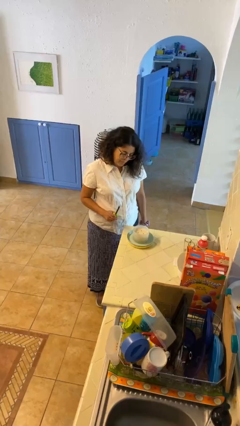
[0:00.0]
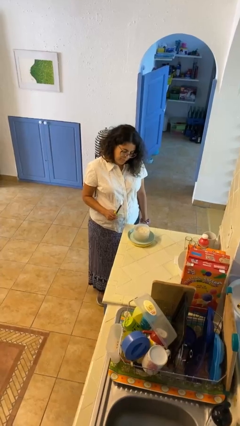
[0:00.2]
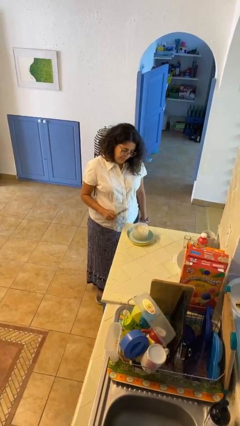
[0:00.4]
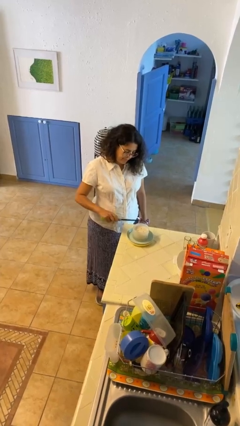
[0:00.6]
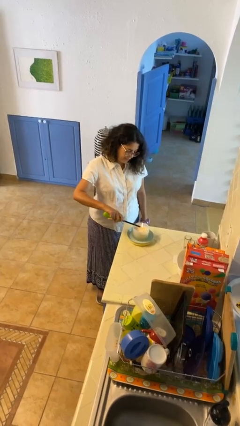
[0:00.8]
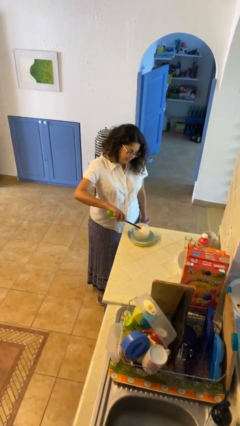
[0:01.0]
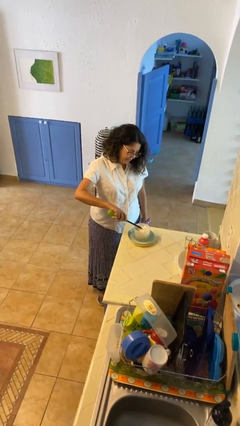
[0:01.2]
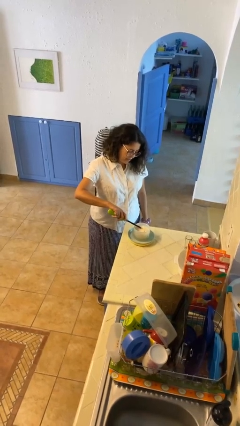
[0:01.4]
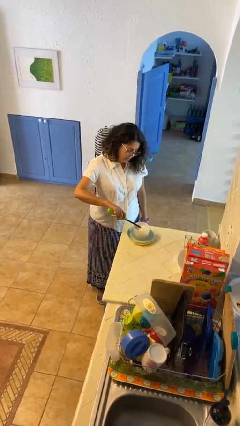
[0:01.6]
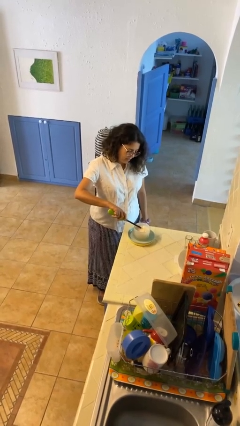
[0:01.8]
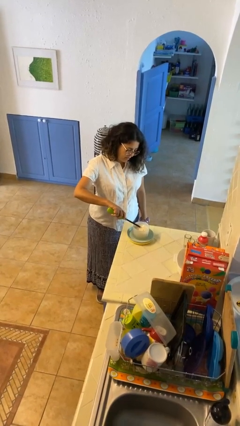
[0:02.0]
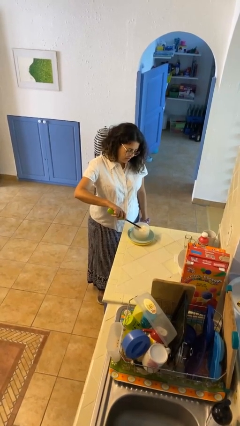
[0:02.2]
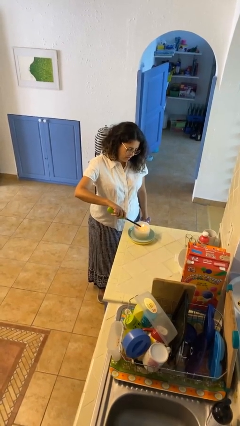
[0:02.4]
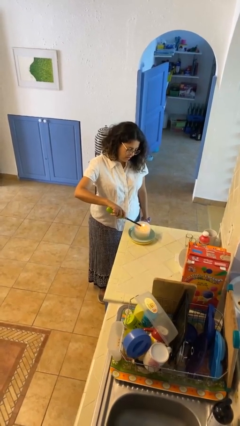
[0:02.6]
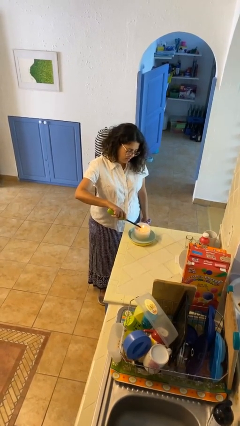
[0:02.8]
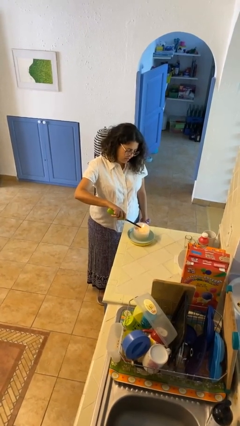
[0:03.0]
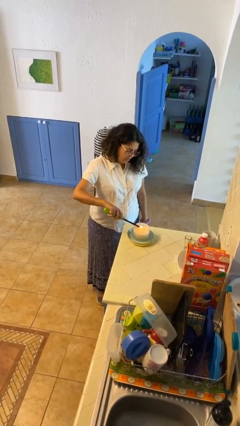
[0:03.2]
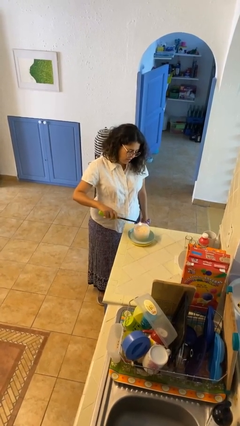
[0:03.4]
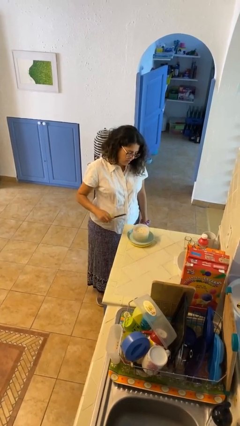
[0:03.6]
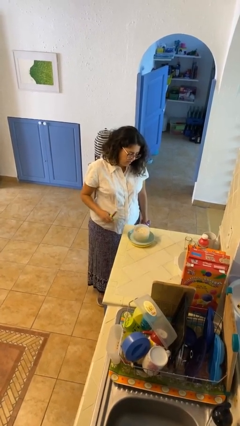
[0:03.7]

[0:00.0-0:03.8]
person lights candle

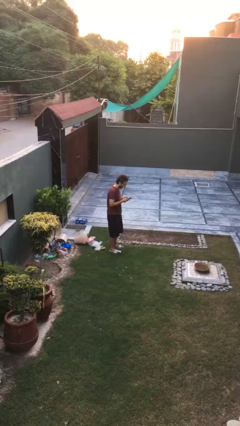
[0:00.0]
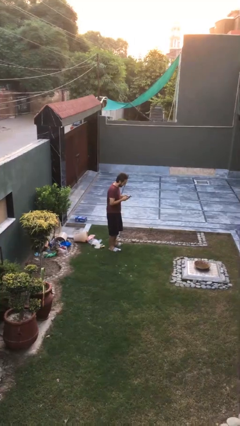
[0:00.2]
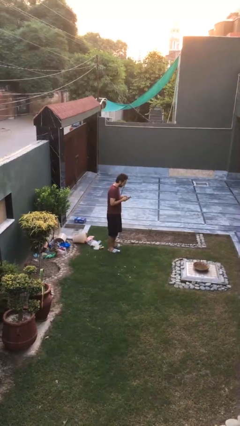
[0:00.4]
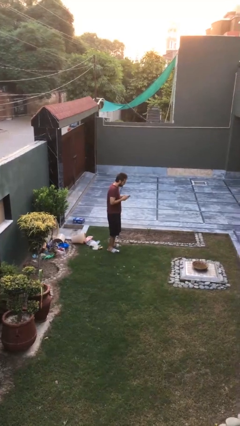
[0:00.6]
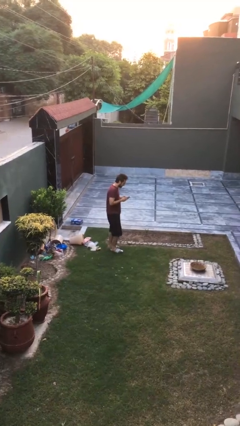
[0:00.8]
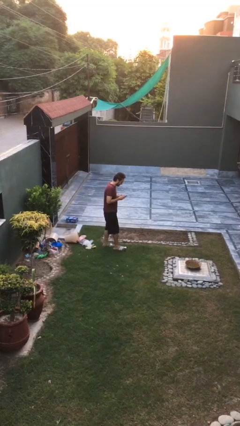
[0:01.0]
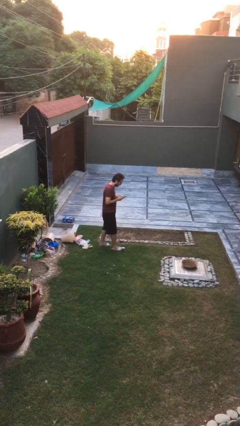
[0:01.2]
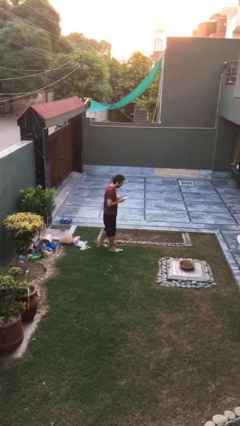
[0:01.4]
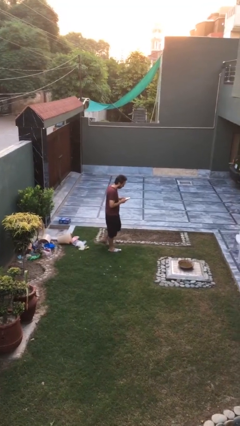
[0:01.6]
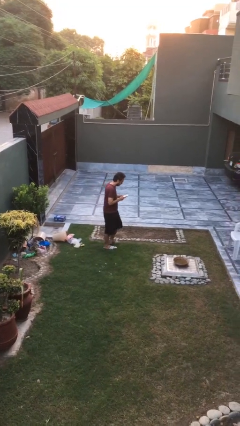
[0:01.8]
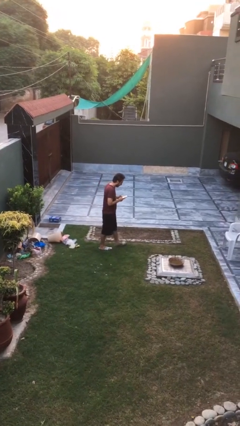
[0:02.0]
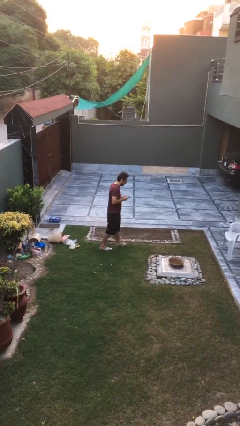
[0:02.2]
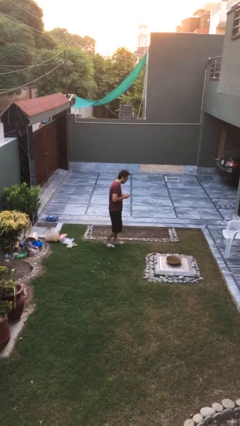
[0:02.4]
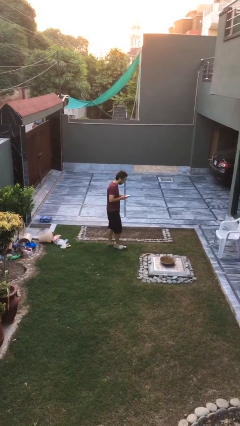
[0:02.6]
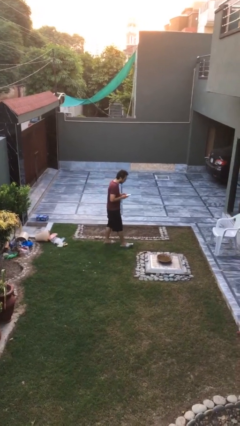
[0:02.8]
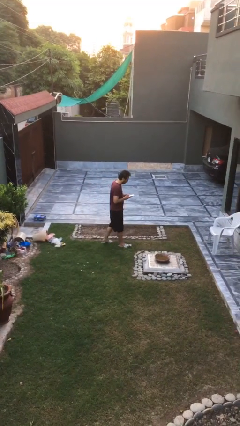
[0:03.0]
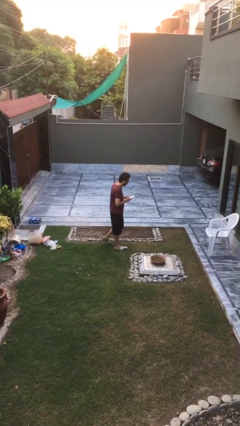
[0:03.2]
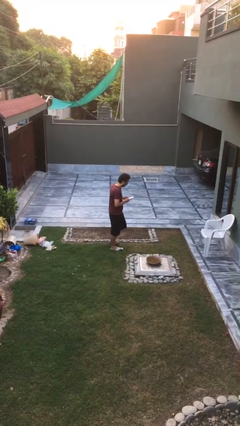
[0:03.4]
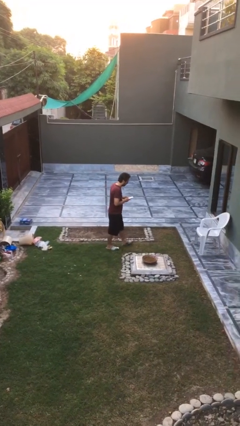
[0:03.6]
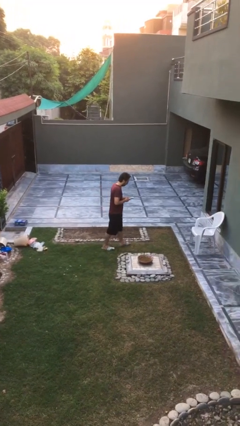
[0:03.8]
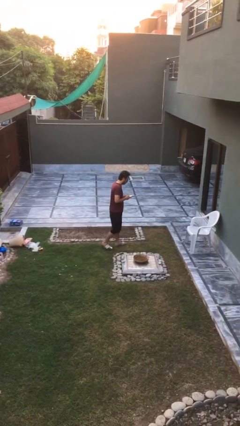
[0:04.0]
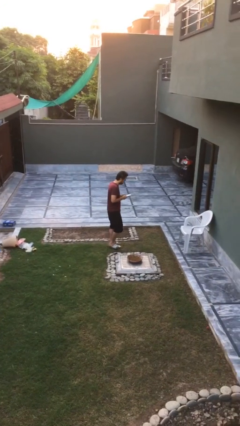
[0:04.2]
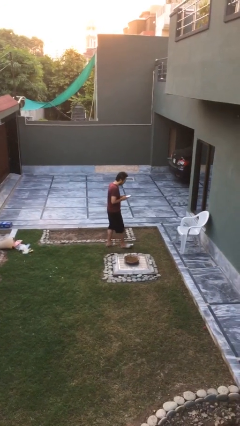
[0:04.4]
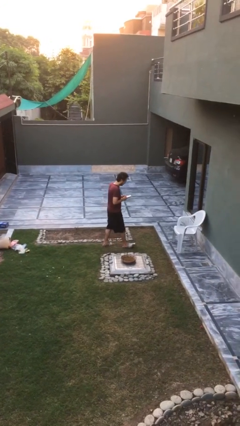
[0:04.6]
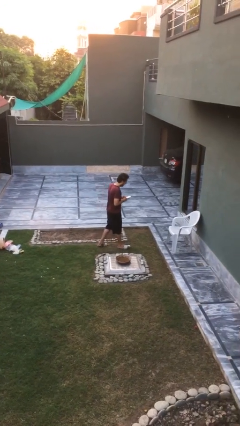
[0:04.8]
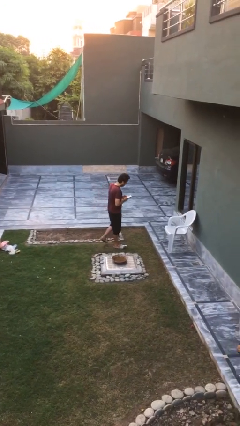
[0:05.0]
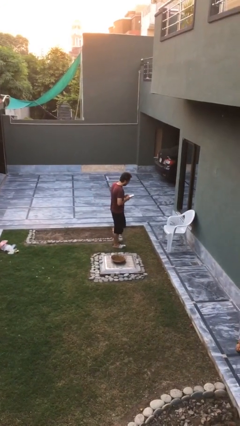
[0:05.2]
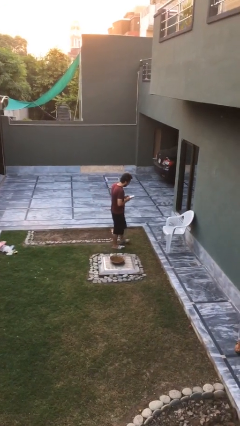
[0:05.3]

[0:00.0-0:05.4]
person texts on phone

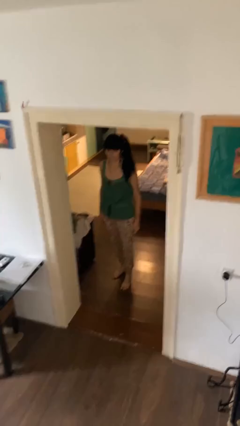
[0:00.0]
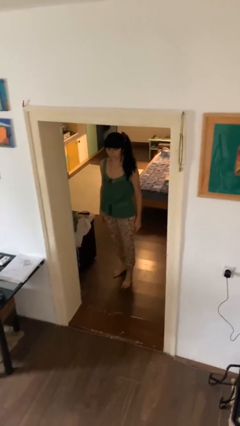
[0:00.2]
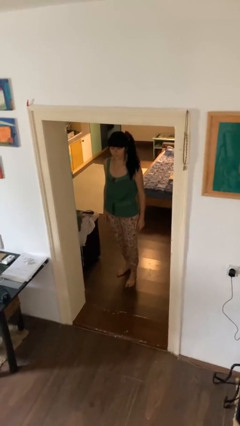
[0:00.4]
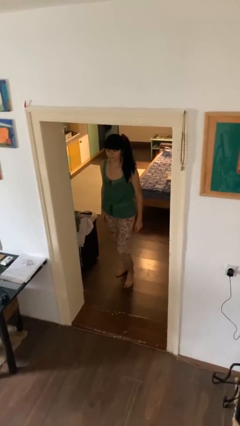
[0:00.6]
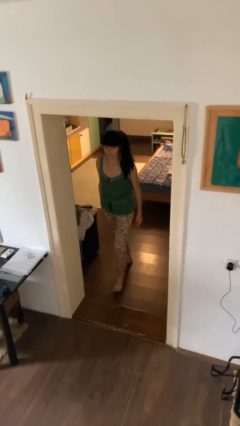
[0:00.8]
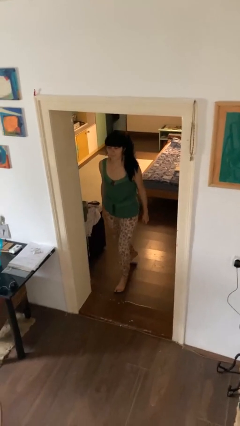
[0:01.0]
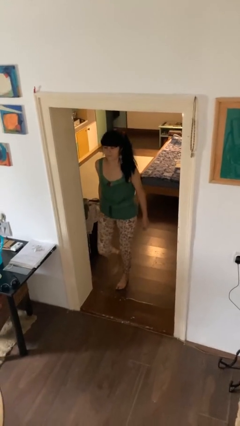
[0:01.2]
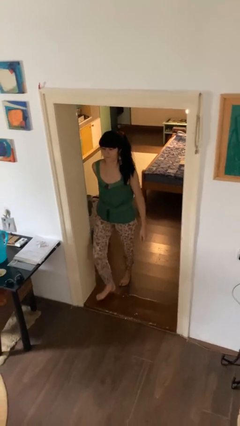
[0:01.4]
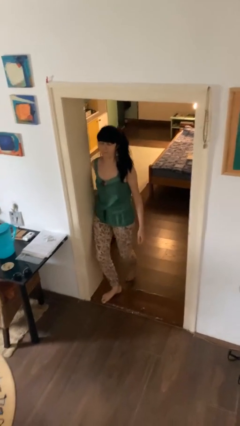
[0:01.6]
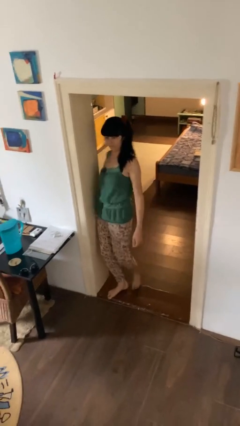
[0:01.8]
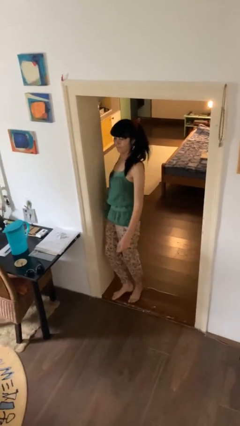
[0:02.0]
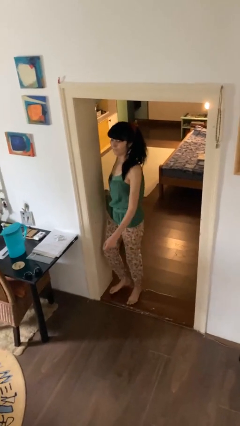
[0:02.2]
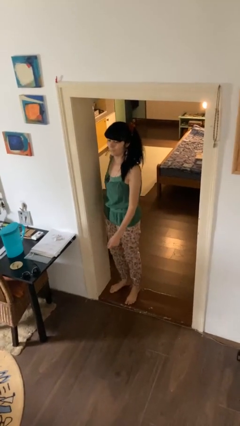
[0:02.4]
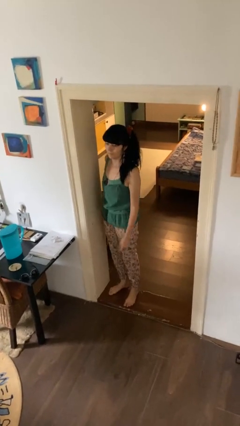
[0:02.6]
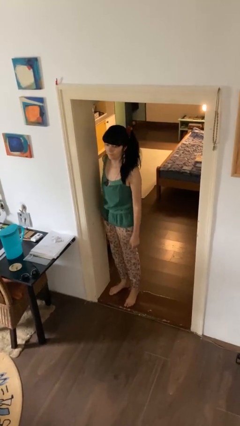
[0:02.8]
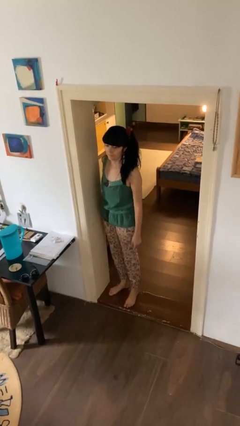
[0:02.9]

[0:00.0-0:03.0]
person bumps into wall

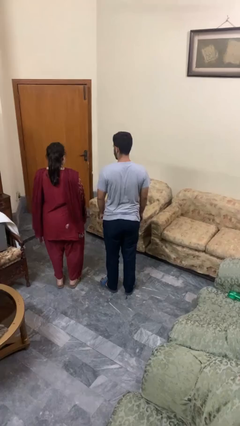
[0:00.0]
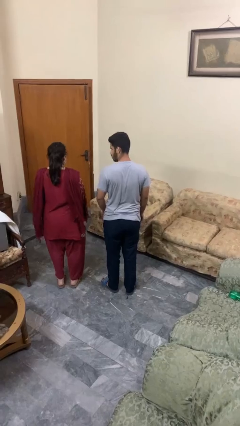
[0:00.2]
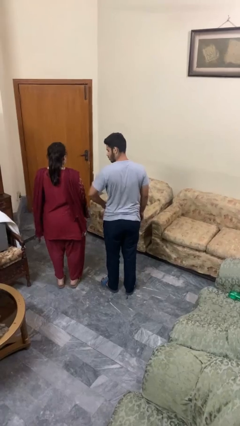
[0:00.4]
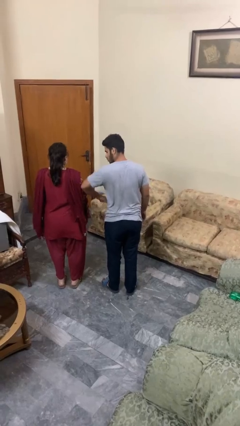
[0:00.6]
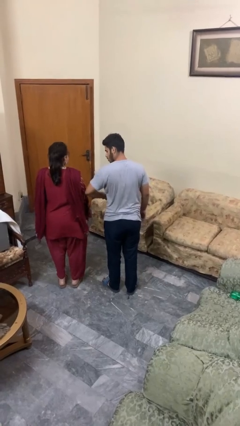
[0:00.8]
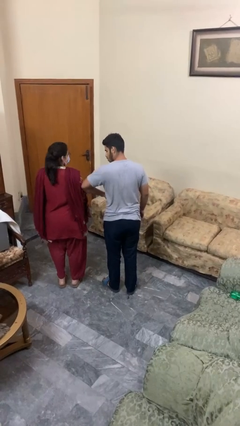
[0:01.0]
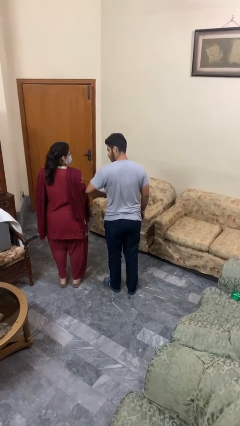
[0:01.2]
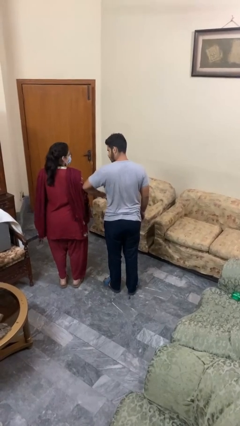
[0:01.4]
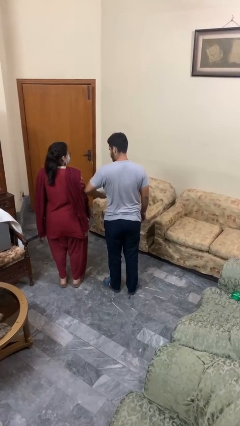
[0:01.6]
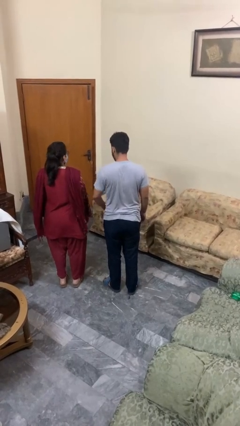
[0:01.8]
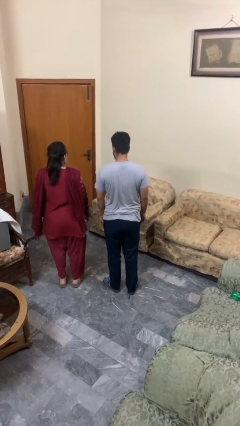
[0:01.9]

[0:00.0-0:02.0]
person nudges person with elbow

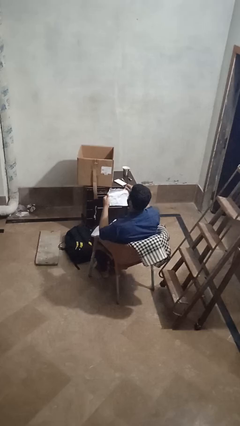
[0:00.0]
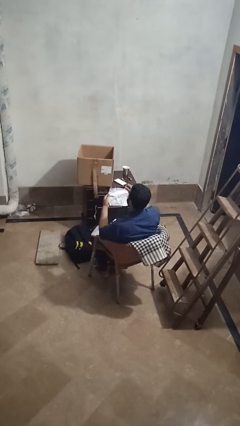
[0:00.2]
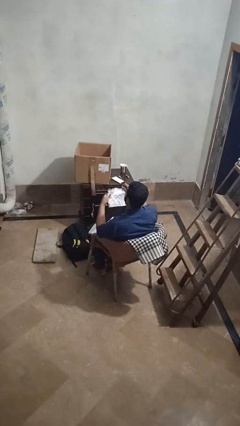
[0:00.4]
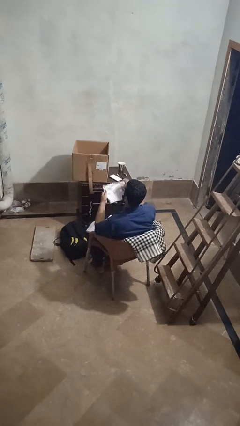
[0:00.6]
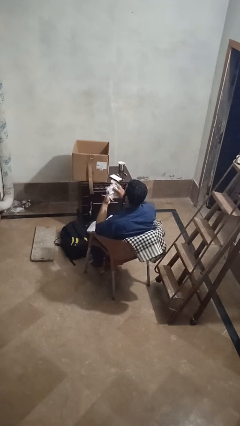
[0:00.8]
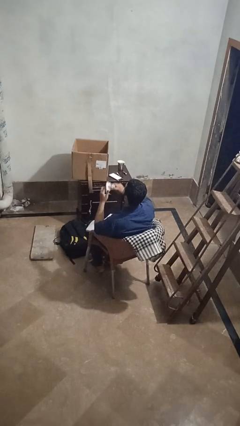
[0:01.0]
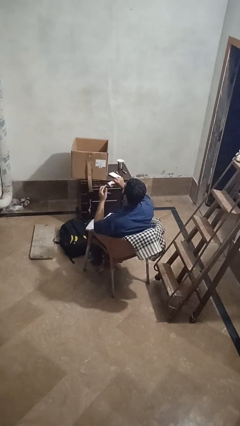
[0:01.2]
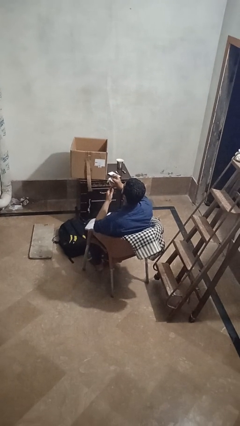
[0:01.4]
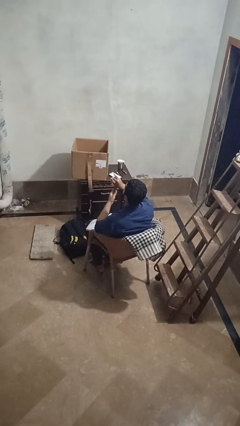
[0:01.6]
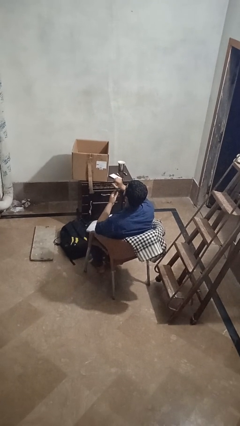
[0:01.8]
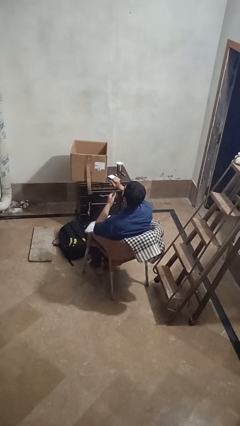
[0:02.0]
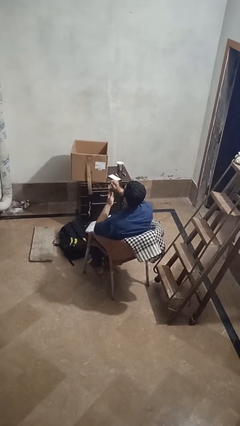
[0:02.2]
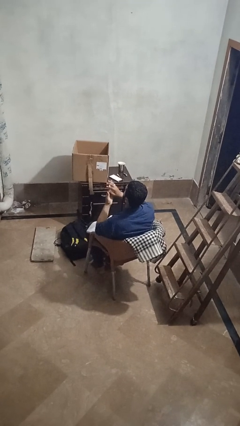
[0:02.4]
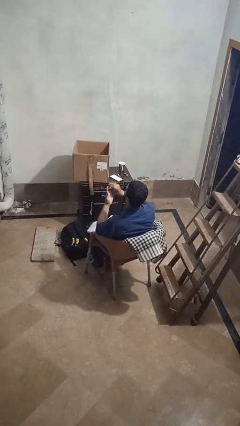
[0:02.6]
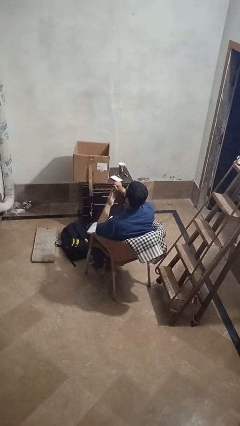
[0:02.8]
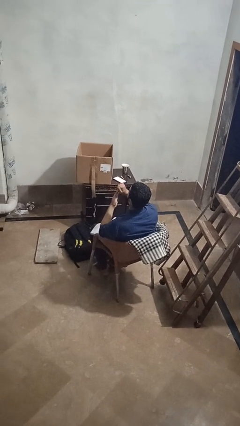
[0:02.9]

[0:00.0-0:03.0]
person crumples paper

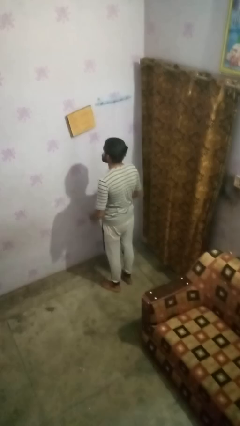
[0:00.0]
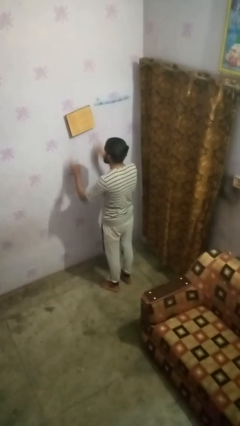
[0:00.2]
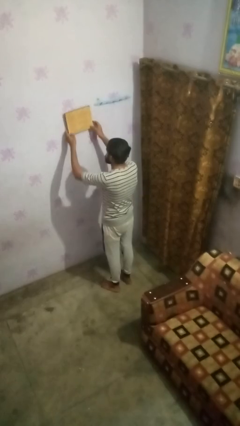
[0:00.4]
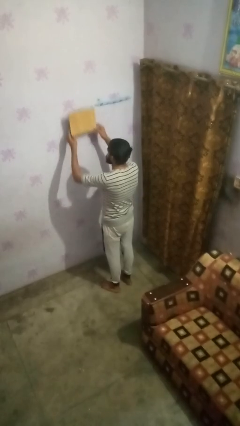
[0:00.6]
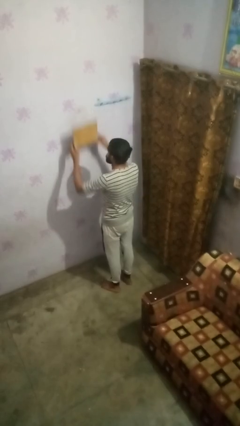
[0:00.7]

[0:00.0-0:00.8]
person takes down picture frame
